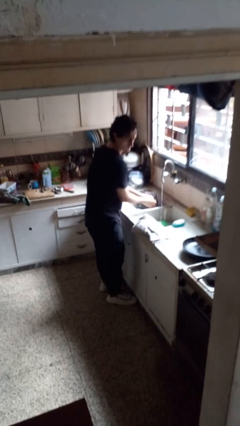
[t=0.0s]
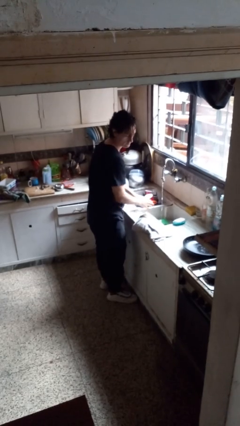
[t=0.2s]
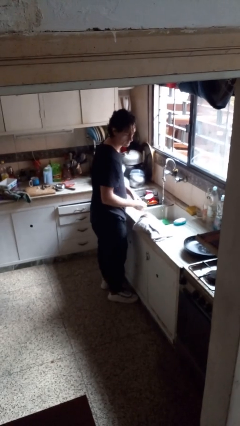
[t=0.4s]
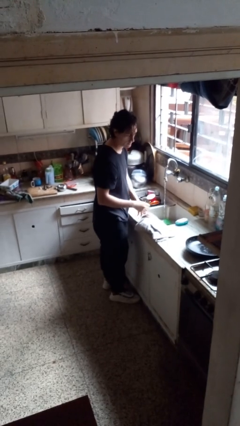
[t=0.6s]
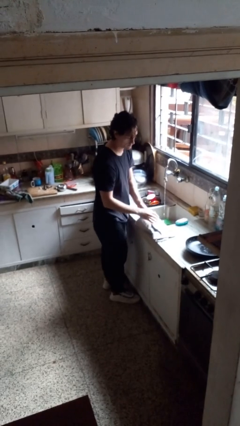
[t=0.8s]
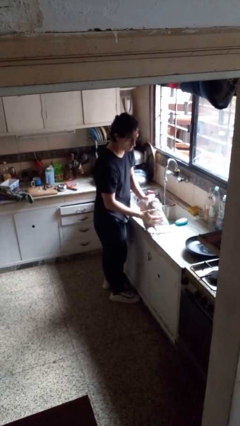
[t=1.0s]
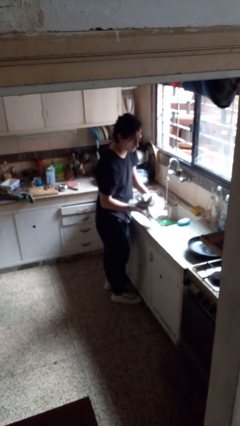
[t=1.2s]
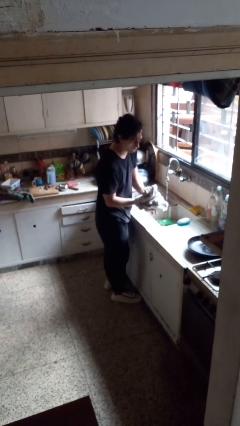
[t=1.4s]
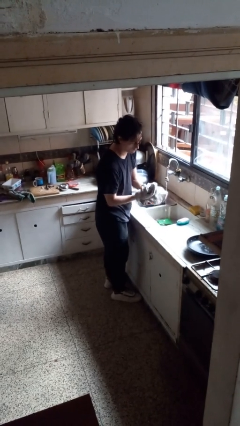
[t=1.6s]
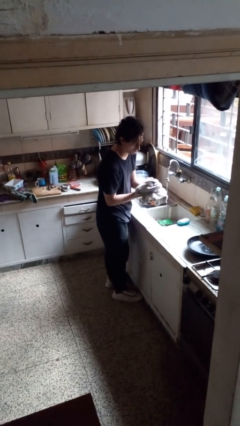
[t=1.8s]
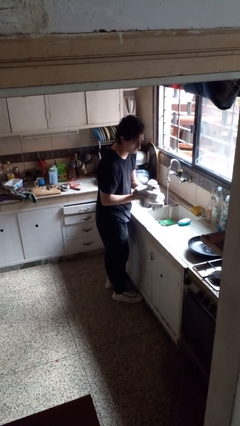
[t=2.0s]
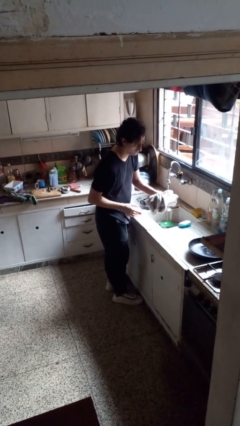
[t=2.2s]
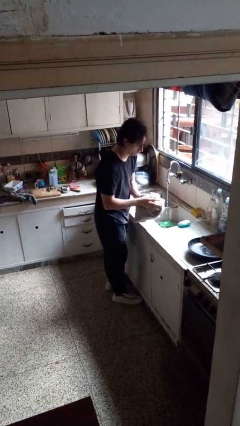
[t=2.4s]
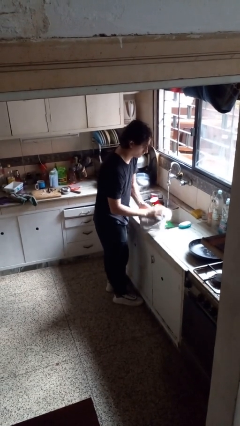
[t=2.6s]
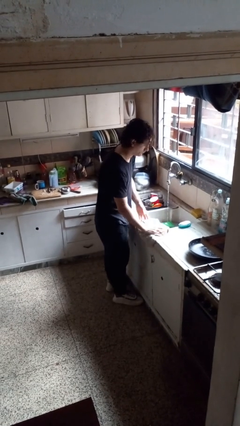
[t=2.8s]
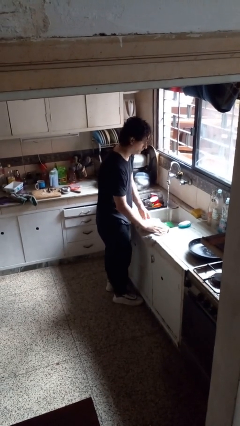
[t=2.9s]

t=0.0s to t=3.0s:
person dries hands with towel

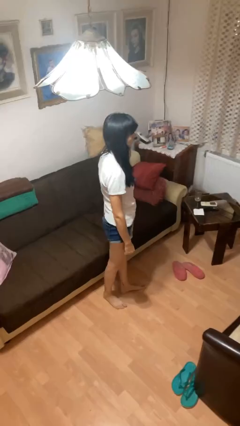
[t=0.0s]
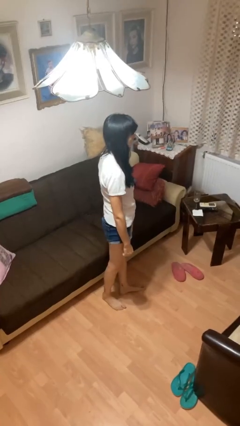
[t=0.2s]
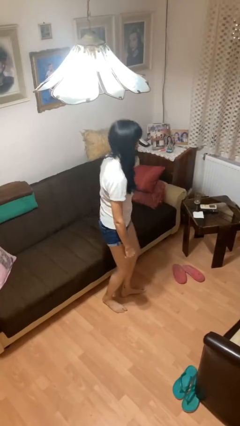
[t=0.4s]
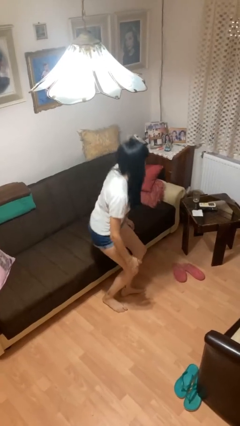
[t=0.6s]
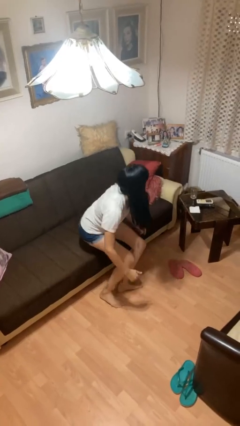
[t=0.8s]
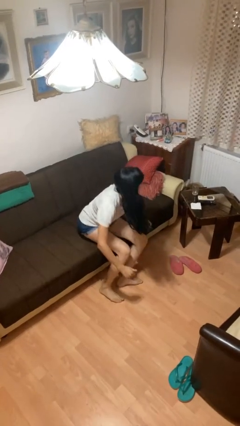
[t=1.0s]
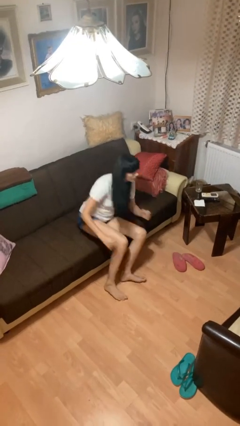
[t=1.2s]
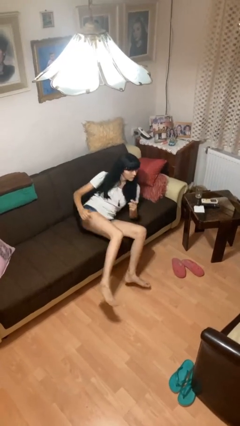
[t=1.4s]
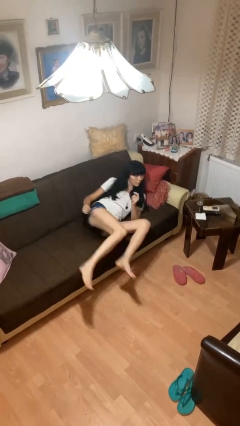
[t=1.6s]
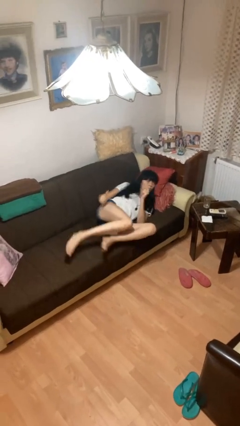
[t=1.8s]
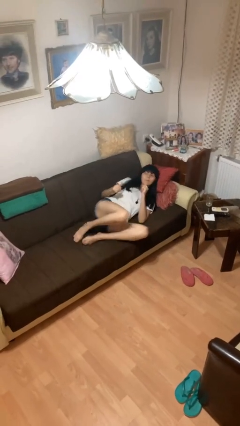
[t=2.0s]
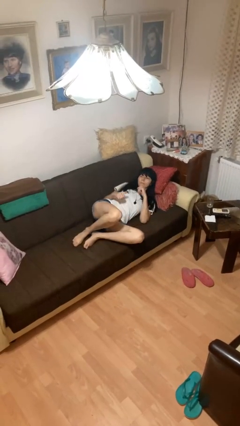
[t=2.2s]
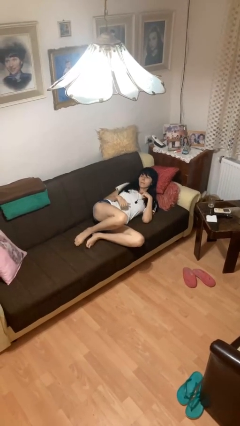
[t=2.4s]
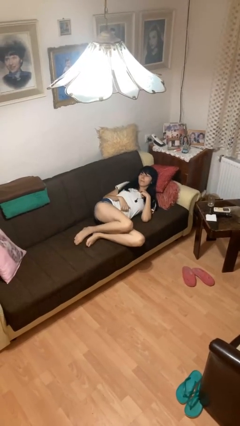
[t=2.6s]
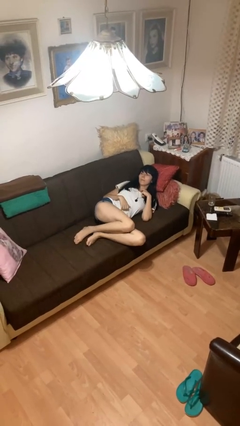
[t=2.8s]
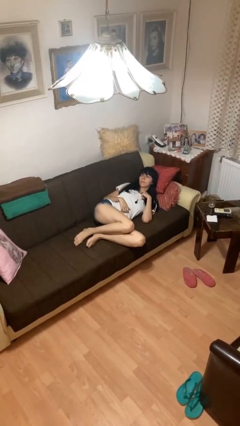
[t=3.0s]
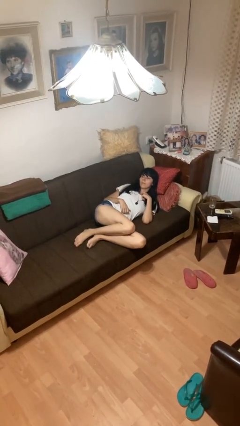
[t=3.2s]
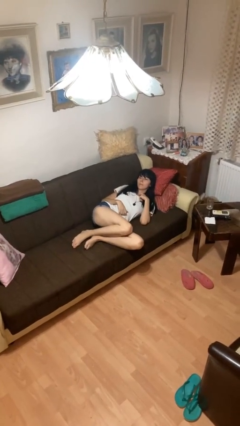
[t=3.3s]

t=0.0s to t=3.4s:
person lies down on couch

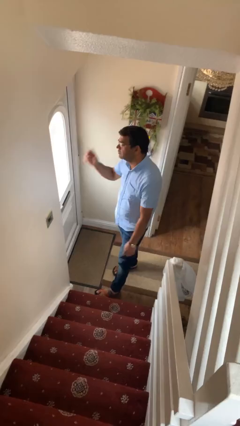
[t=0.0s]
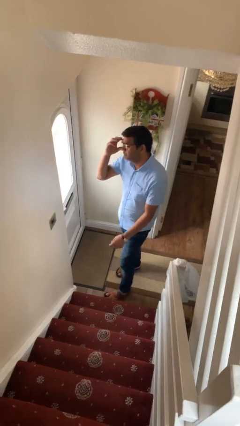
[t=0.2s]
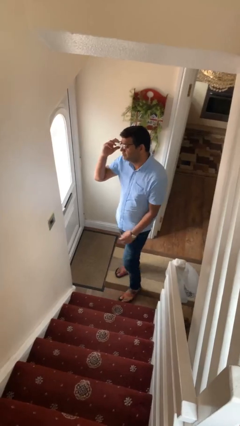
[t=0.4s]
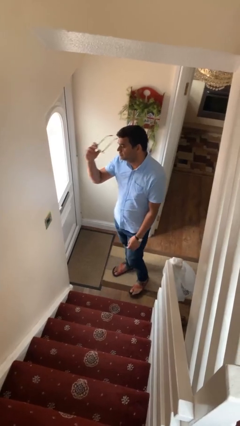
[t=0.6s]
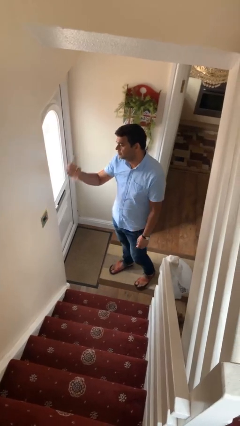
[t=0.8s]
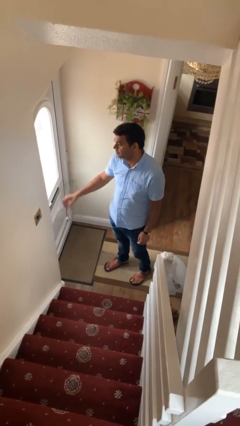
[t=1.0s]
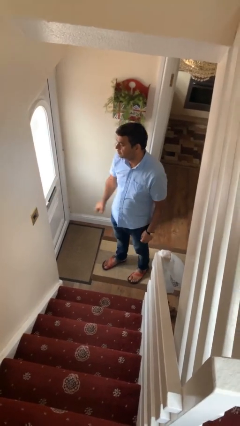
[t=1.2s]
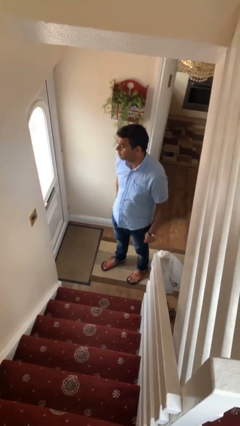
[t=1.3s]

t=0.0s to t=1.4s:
person takes off glasses

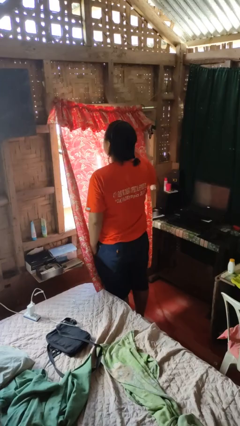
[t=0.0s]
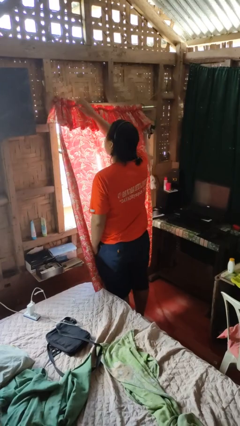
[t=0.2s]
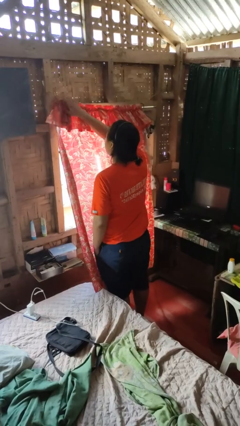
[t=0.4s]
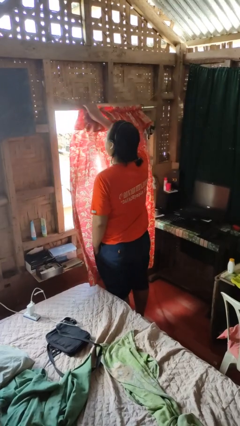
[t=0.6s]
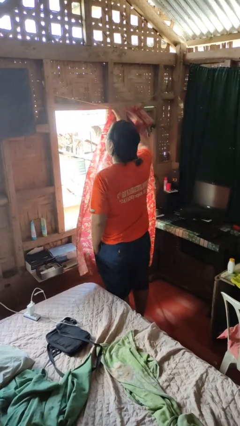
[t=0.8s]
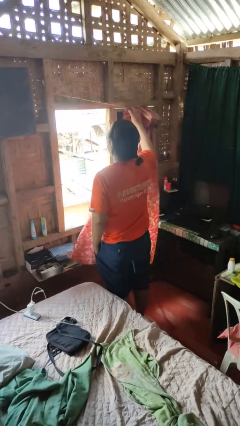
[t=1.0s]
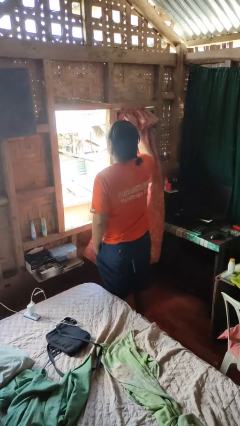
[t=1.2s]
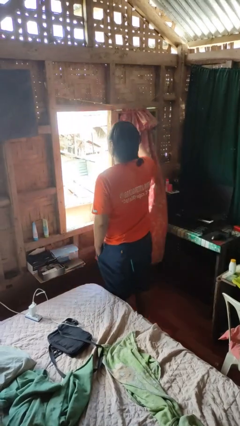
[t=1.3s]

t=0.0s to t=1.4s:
person opens curtains

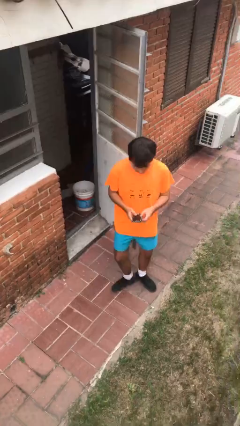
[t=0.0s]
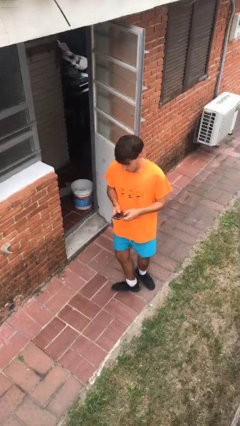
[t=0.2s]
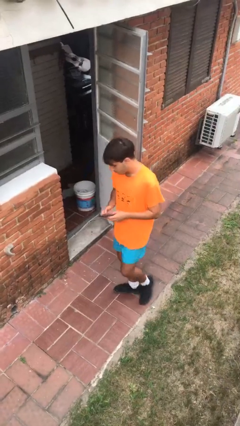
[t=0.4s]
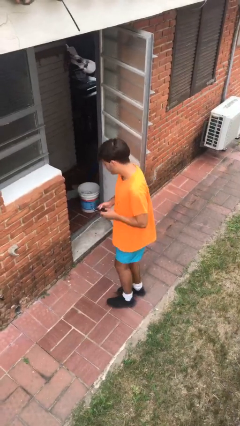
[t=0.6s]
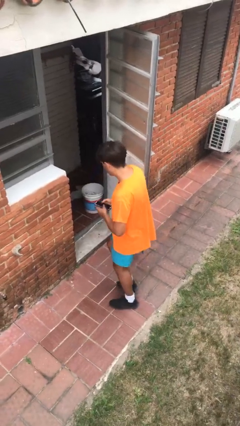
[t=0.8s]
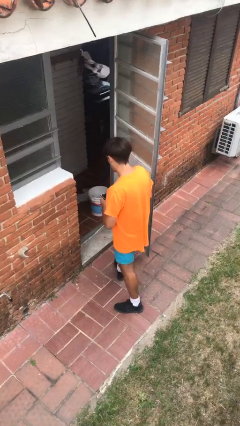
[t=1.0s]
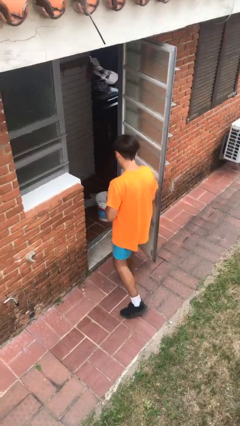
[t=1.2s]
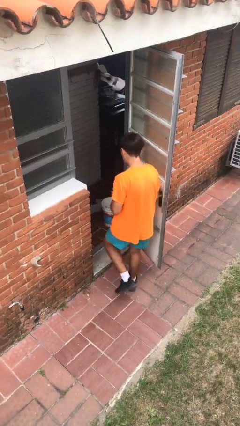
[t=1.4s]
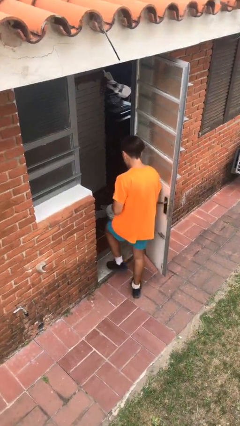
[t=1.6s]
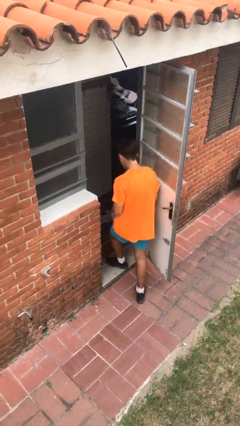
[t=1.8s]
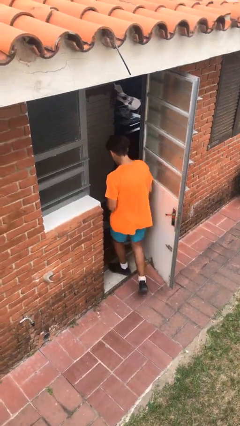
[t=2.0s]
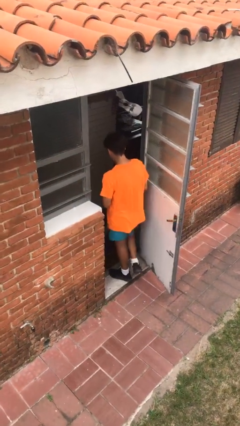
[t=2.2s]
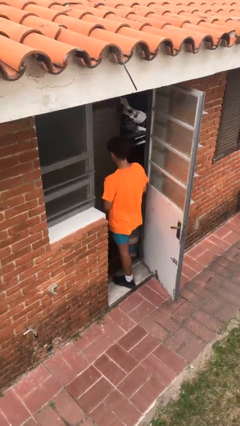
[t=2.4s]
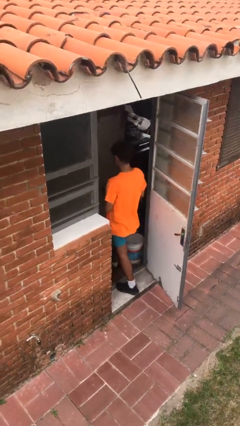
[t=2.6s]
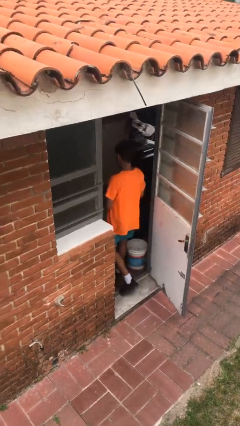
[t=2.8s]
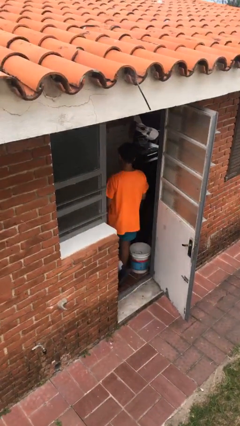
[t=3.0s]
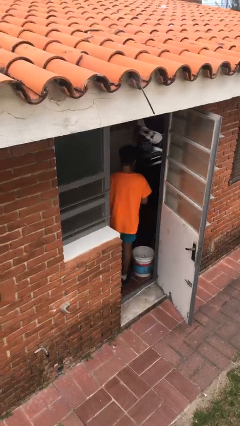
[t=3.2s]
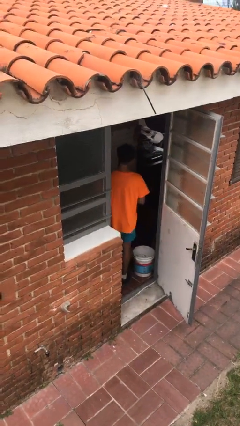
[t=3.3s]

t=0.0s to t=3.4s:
person exits scene through structure

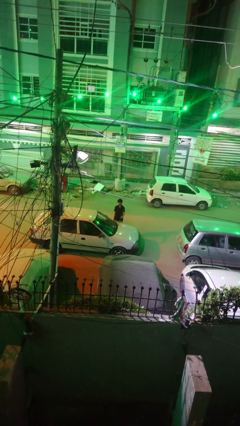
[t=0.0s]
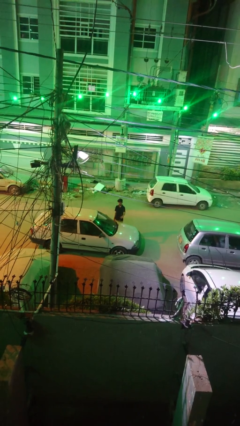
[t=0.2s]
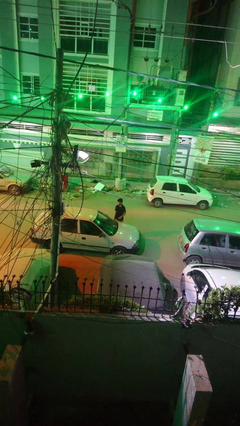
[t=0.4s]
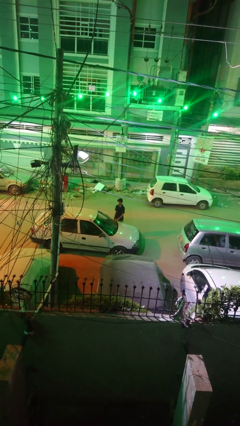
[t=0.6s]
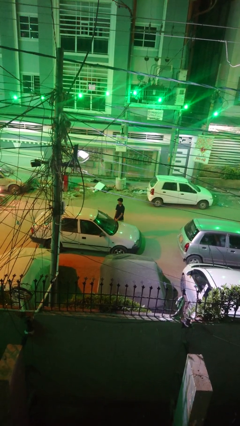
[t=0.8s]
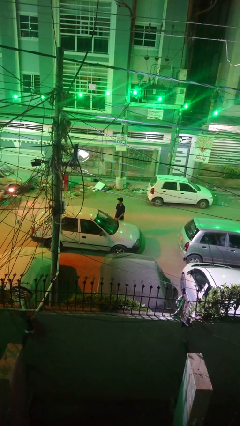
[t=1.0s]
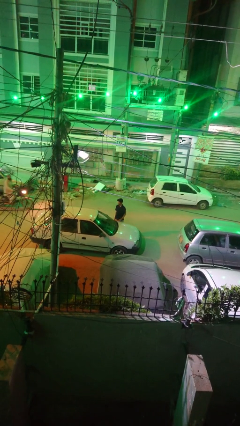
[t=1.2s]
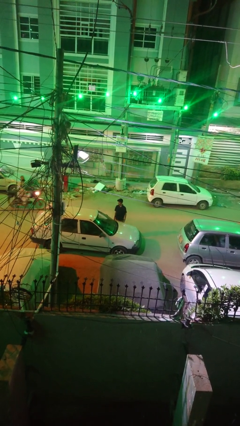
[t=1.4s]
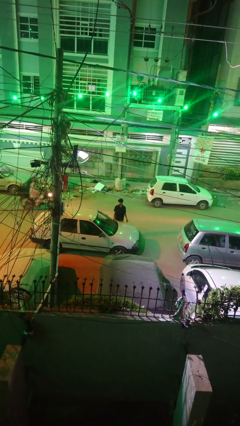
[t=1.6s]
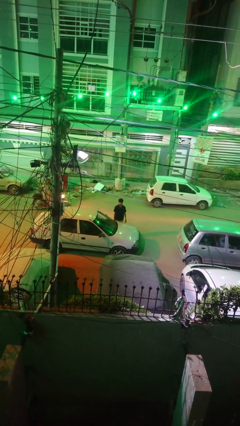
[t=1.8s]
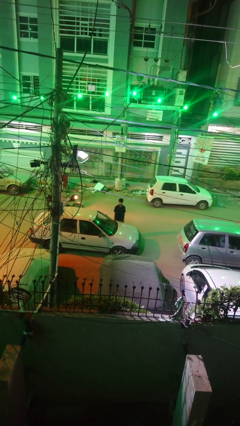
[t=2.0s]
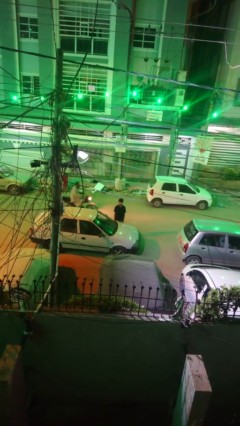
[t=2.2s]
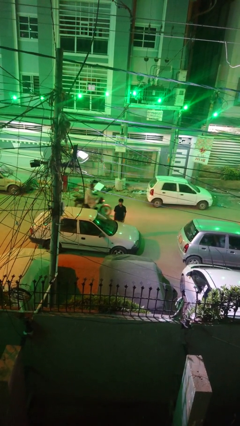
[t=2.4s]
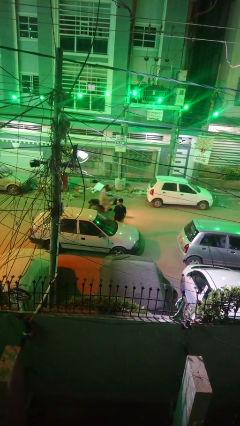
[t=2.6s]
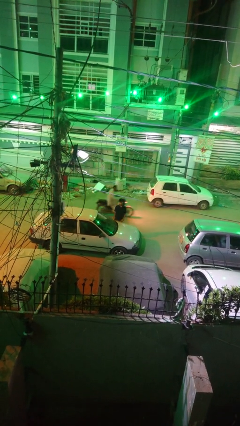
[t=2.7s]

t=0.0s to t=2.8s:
person flips down car wipers

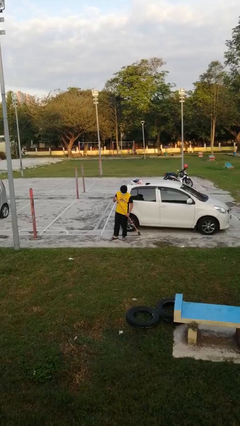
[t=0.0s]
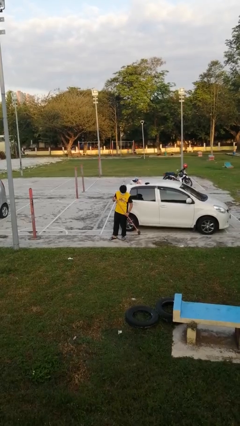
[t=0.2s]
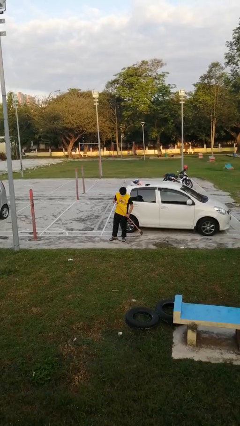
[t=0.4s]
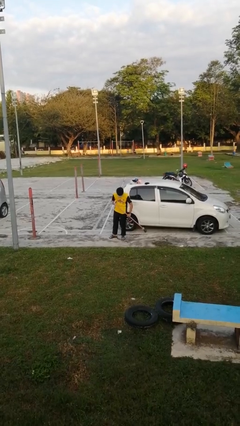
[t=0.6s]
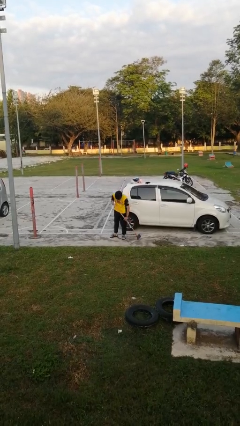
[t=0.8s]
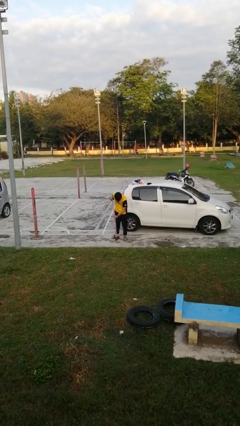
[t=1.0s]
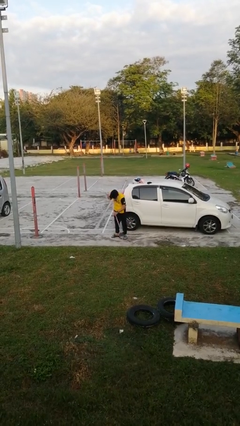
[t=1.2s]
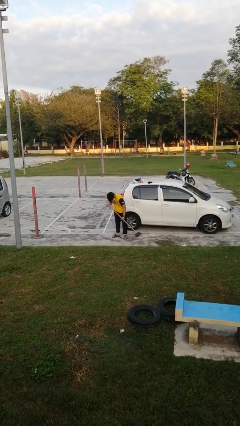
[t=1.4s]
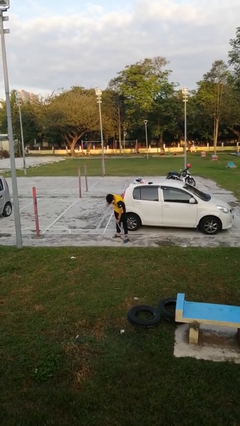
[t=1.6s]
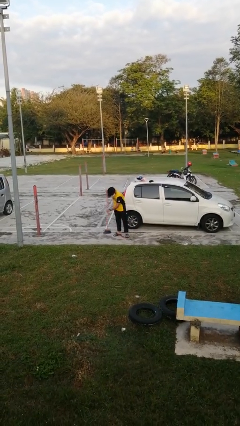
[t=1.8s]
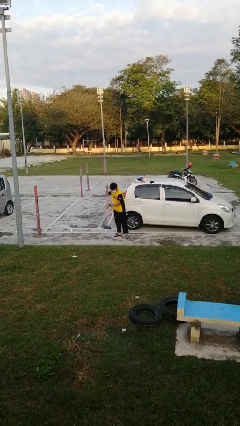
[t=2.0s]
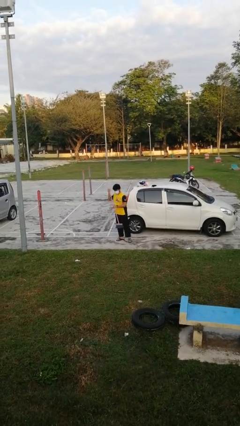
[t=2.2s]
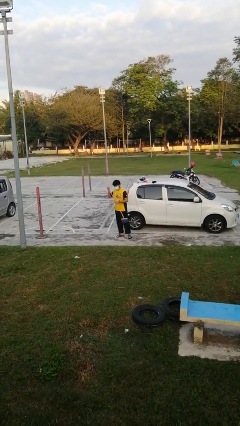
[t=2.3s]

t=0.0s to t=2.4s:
person sweeps floor
